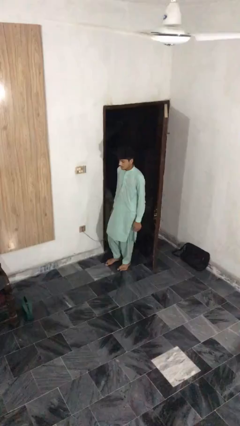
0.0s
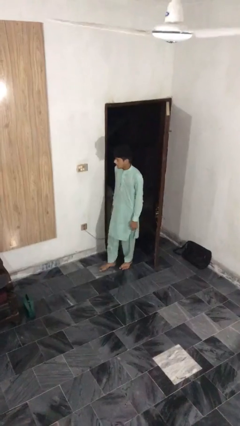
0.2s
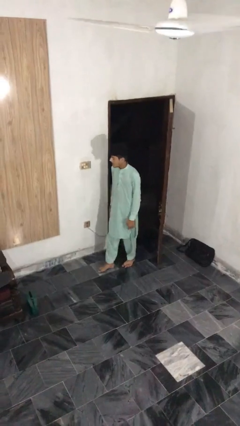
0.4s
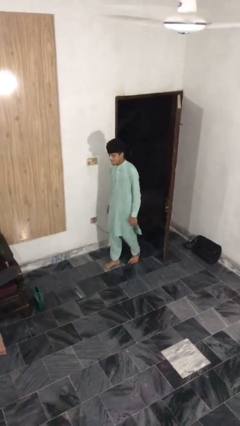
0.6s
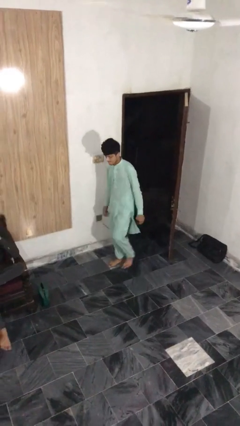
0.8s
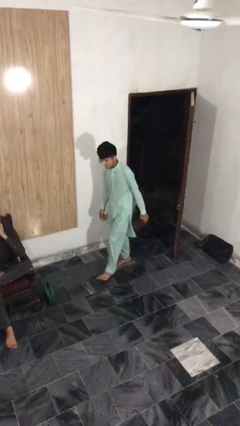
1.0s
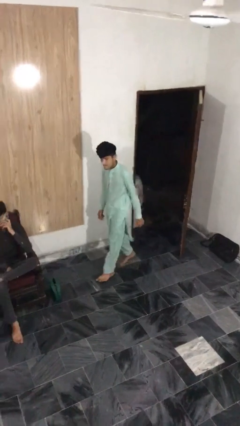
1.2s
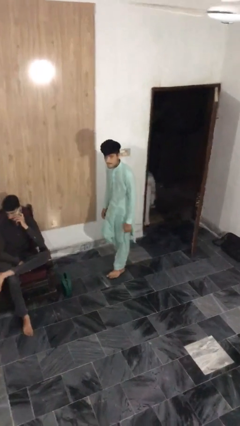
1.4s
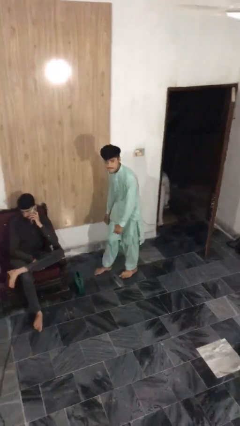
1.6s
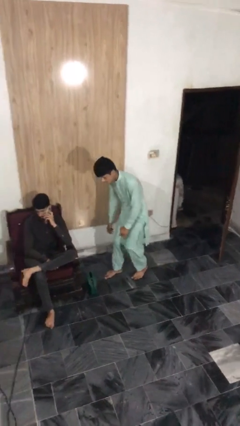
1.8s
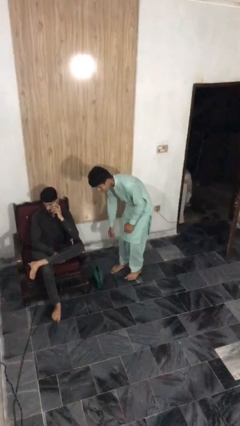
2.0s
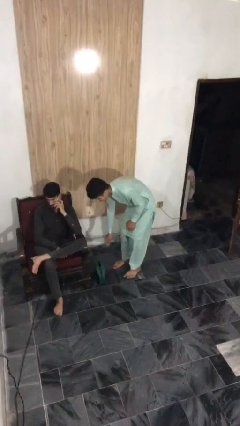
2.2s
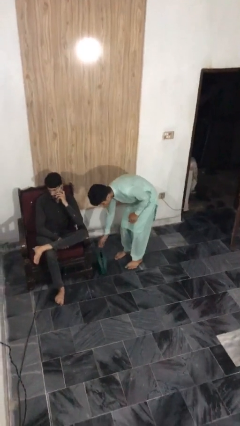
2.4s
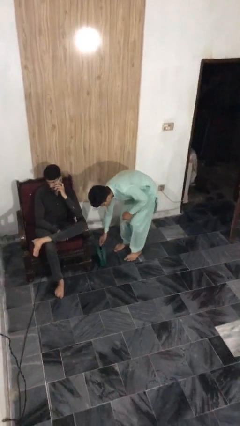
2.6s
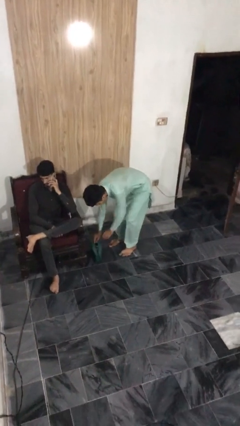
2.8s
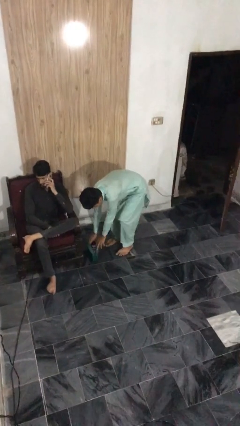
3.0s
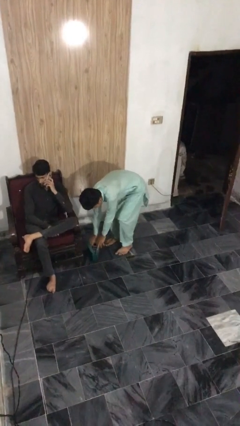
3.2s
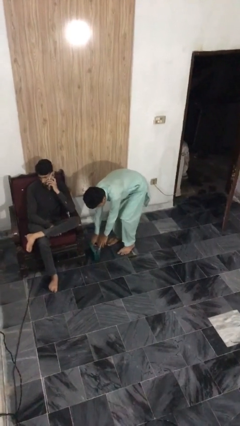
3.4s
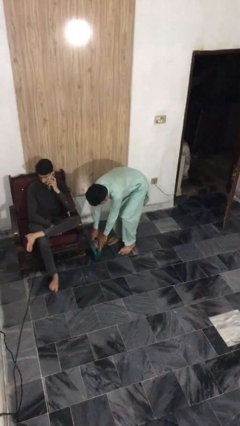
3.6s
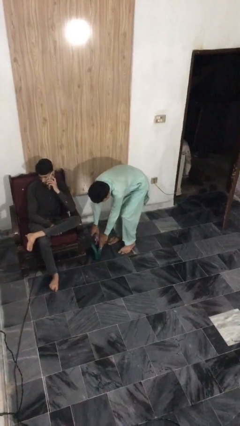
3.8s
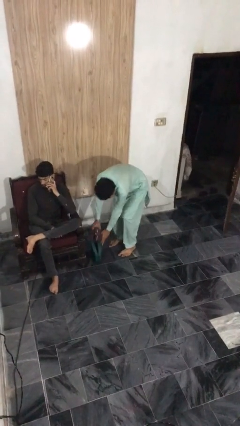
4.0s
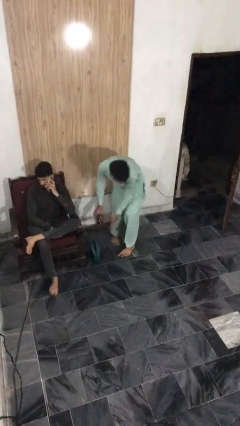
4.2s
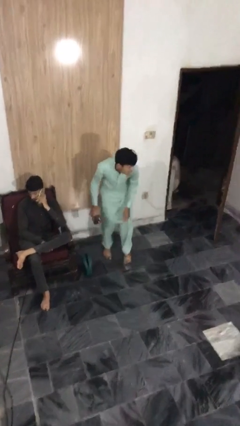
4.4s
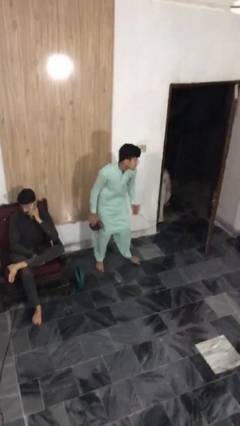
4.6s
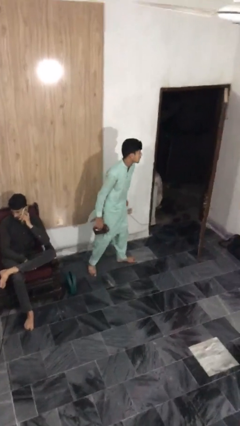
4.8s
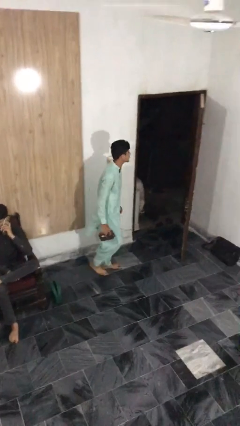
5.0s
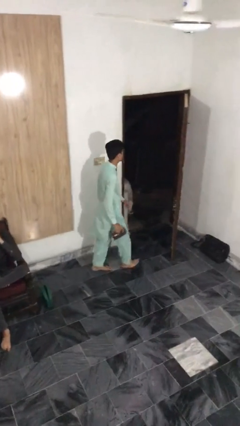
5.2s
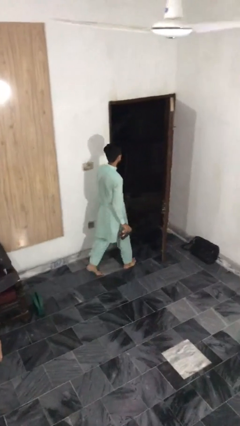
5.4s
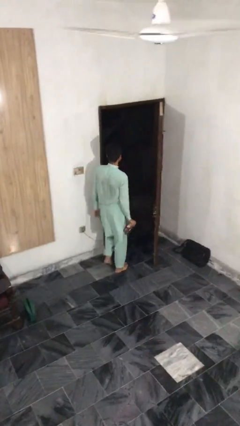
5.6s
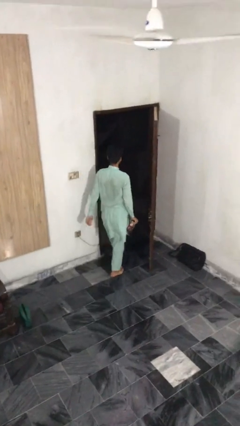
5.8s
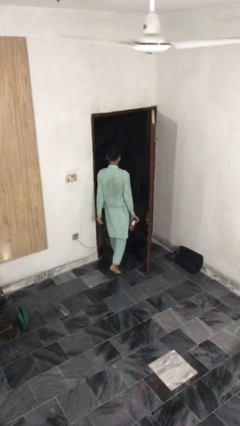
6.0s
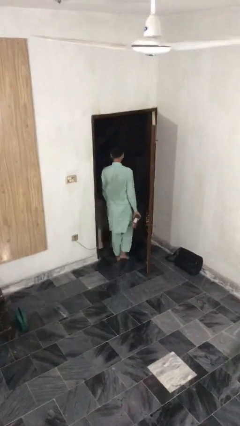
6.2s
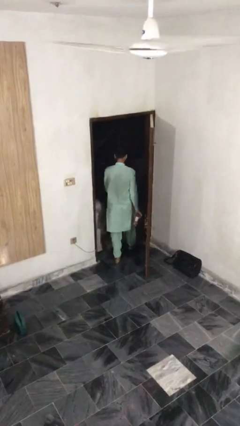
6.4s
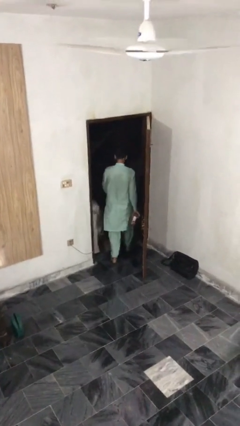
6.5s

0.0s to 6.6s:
person steals object from person

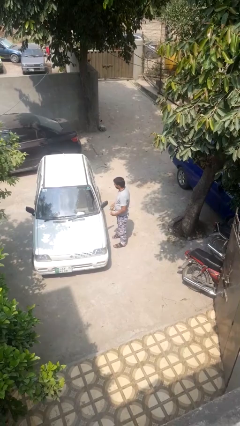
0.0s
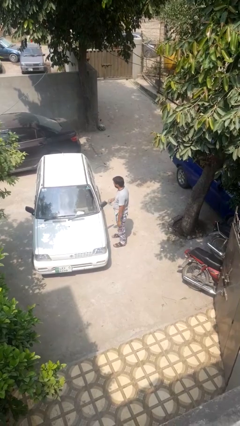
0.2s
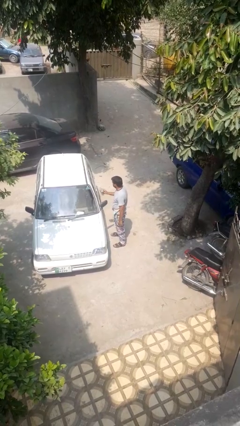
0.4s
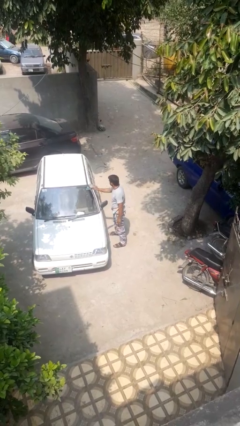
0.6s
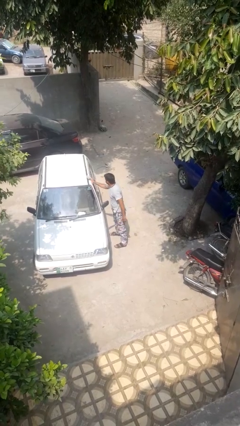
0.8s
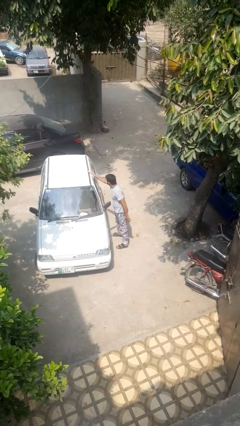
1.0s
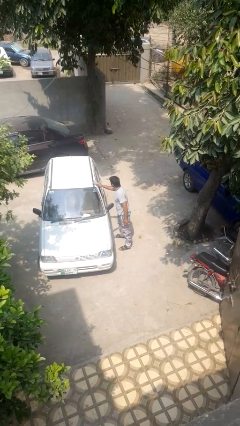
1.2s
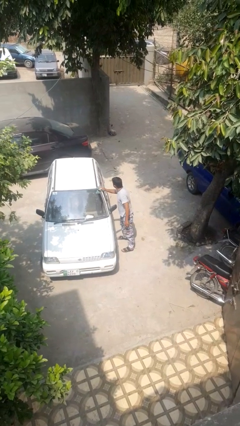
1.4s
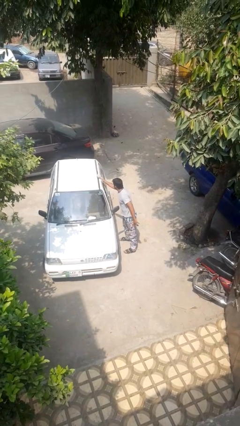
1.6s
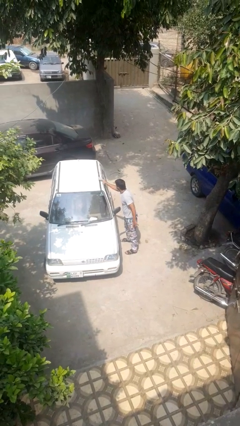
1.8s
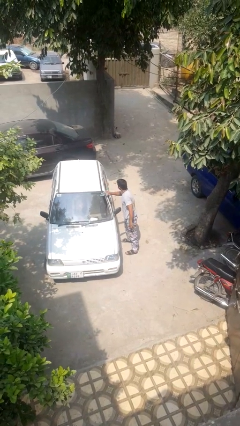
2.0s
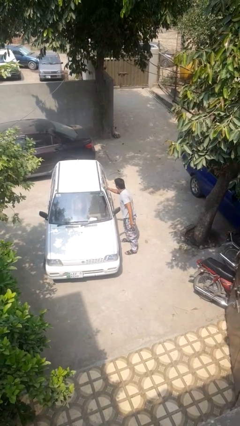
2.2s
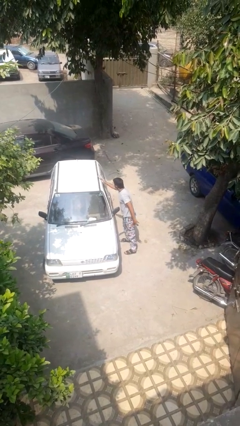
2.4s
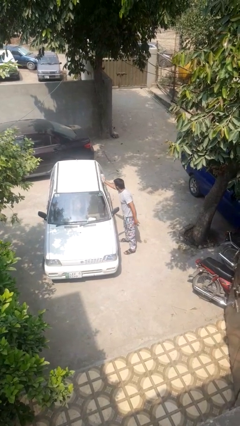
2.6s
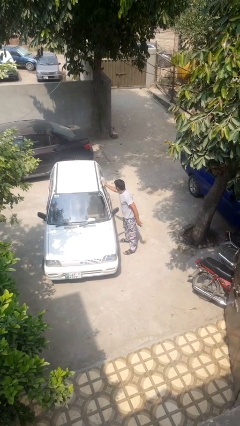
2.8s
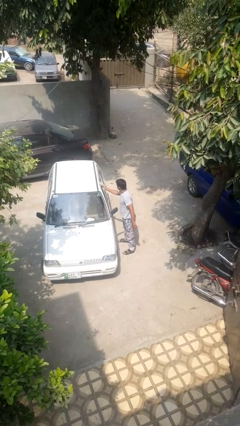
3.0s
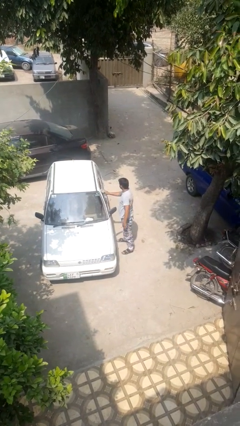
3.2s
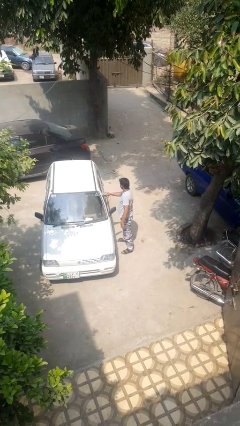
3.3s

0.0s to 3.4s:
person polishes car with rag

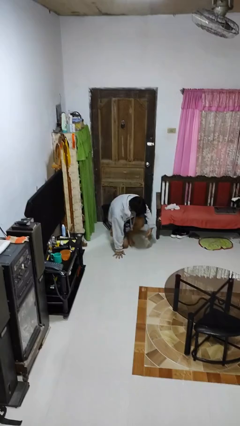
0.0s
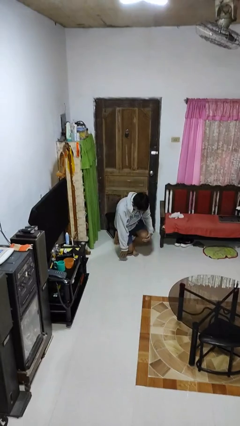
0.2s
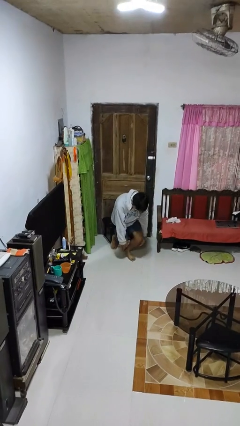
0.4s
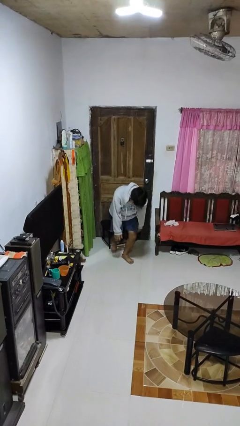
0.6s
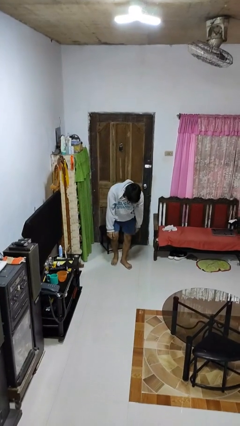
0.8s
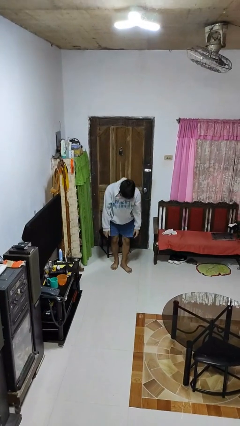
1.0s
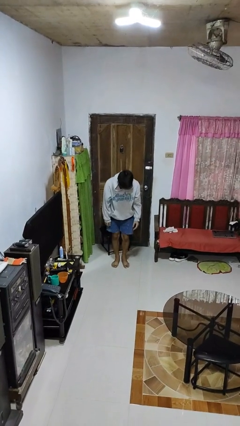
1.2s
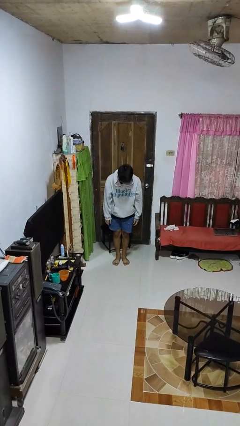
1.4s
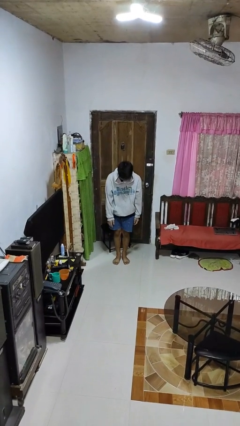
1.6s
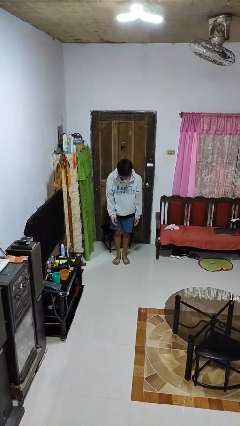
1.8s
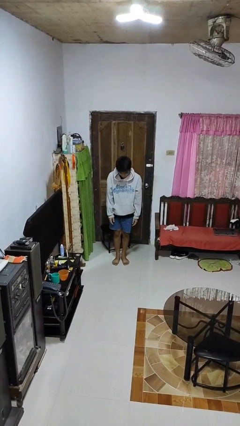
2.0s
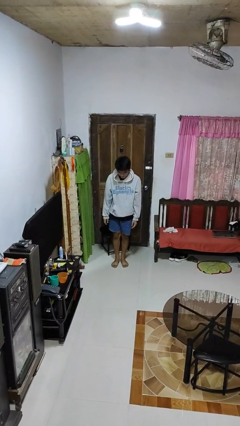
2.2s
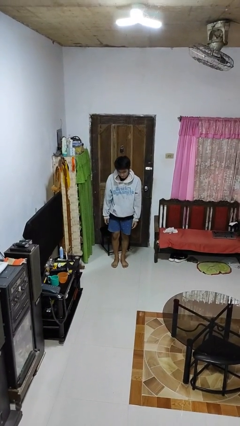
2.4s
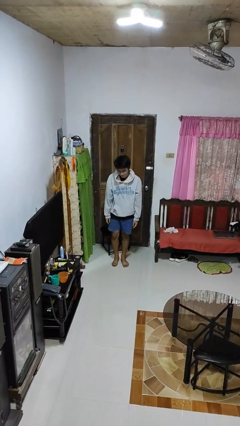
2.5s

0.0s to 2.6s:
person stands up from floor

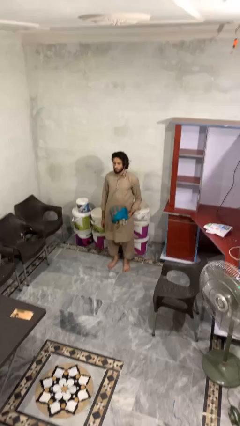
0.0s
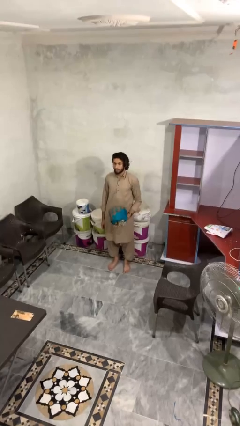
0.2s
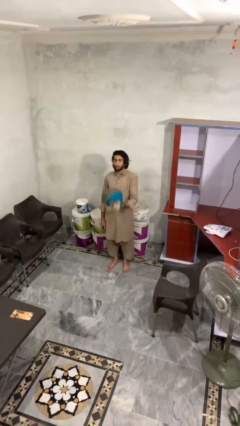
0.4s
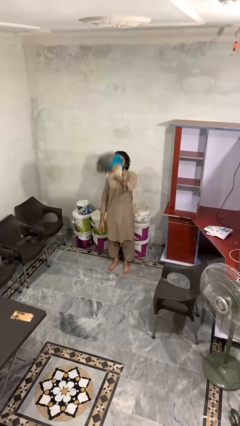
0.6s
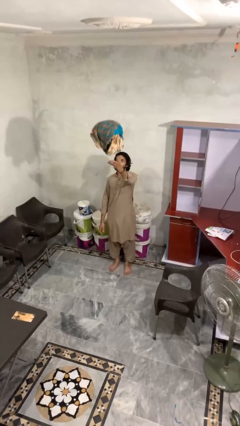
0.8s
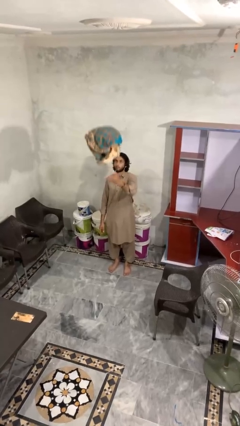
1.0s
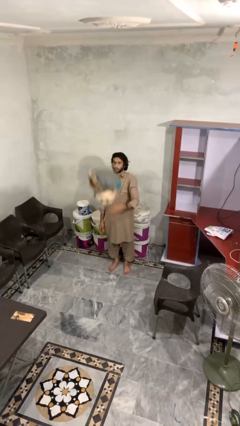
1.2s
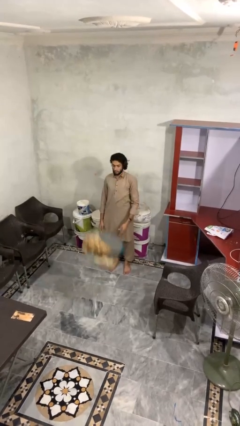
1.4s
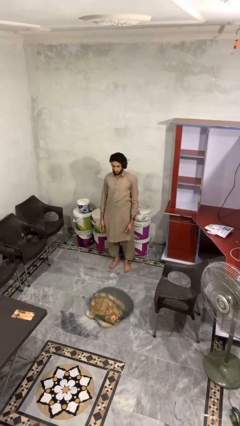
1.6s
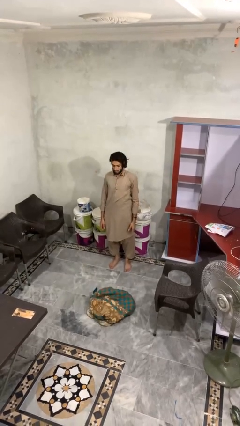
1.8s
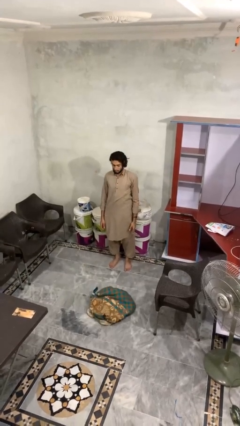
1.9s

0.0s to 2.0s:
person throws object into air

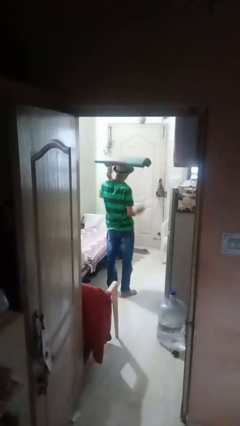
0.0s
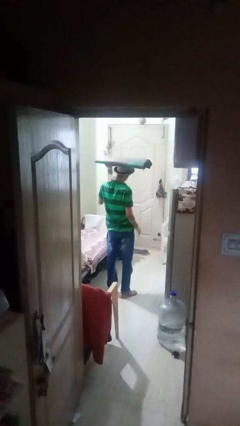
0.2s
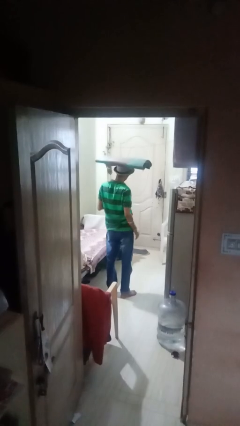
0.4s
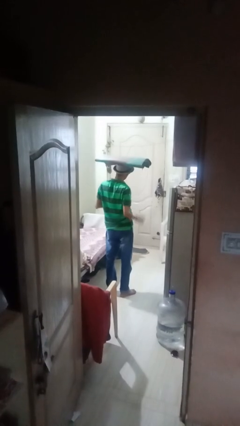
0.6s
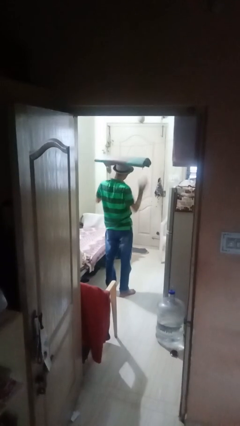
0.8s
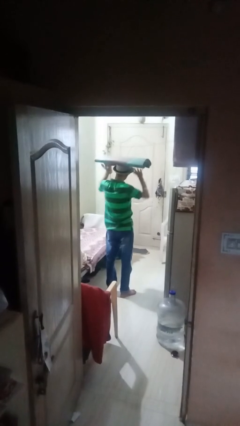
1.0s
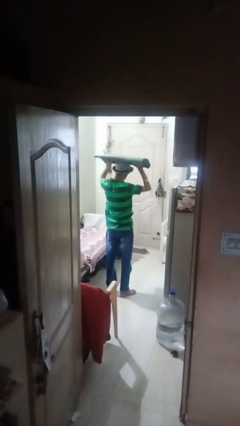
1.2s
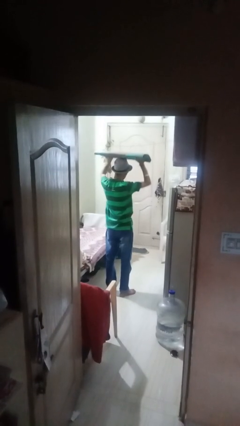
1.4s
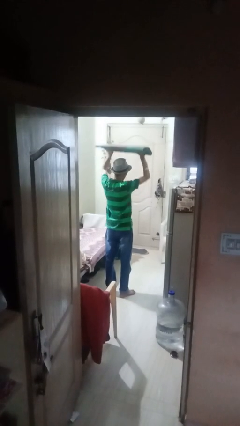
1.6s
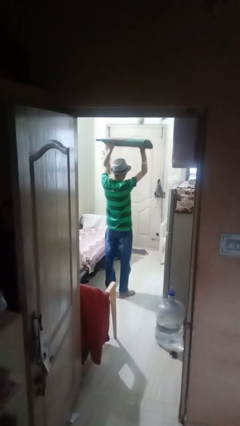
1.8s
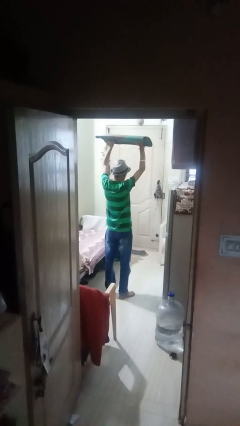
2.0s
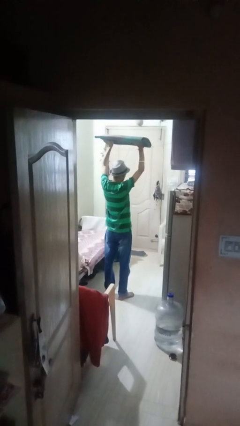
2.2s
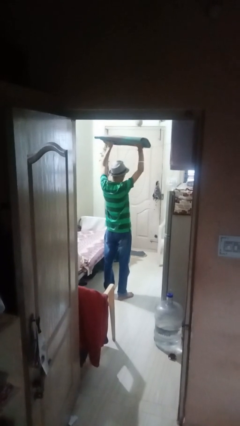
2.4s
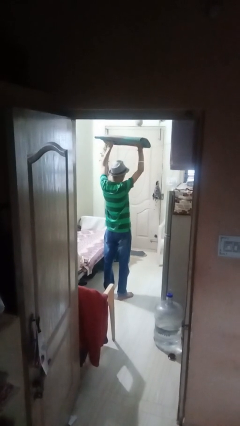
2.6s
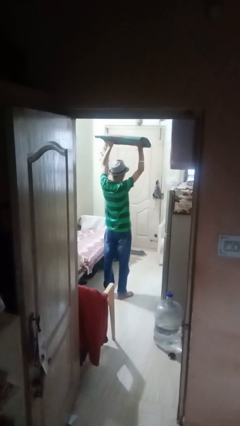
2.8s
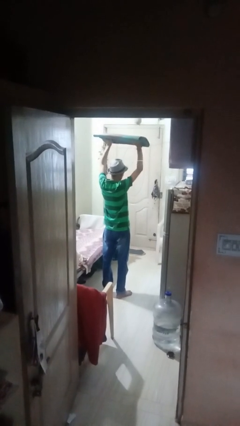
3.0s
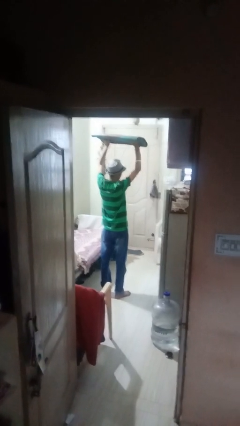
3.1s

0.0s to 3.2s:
person holds object above head

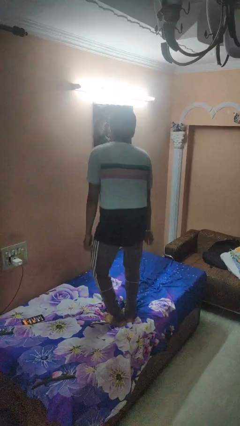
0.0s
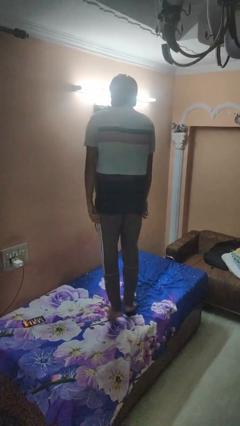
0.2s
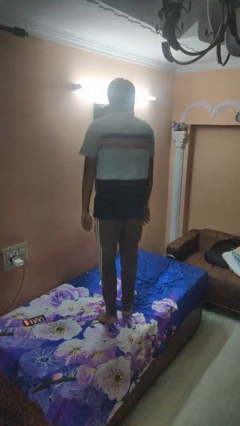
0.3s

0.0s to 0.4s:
person jumps on bed
